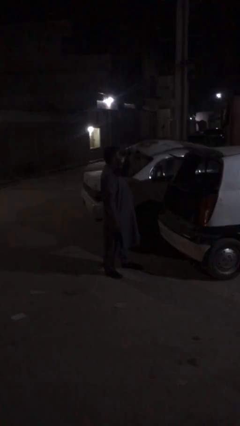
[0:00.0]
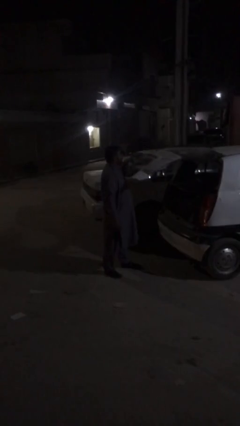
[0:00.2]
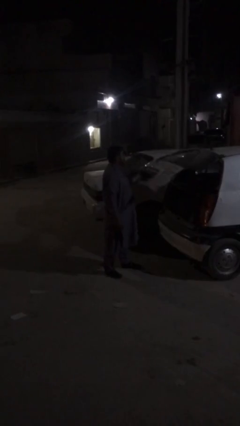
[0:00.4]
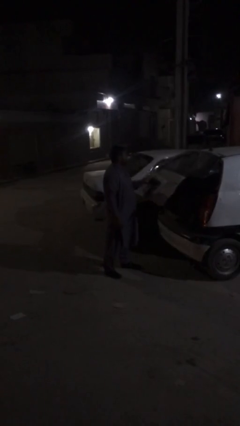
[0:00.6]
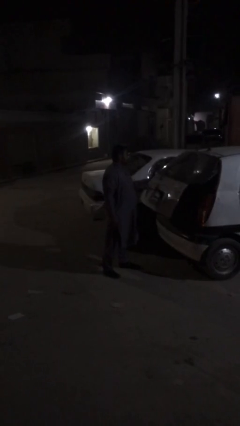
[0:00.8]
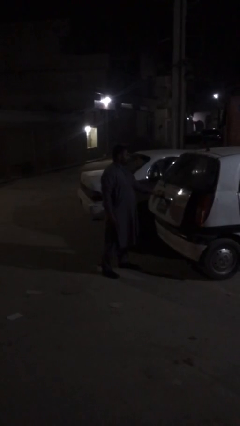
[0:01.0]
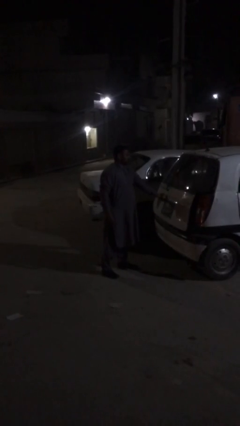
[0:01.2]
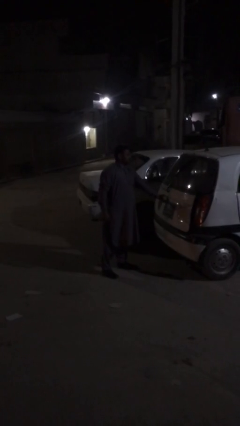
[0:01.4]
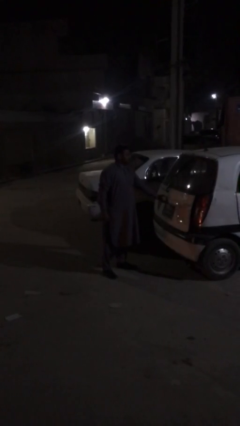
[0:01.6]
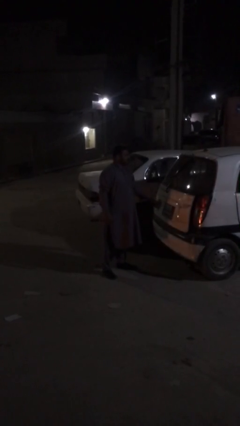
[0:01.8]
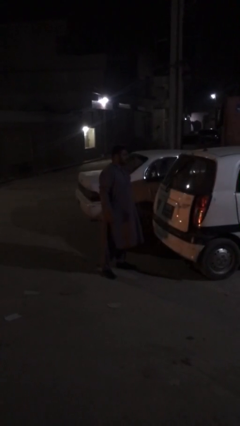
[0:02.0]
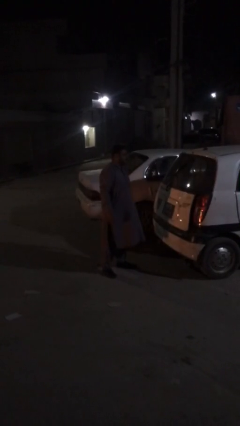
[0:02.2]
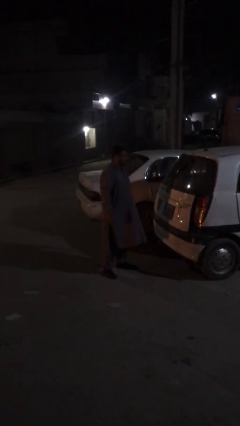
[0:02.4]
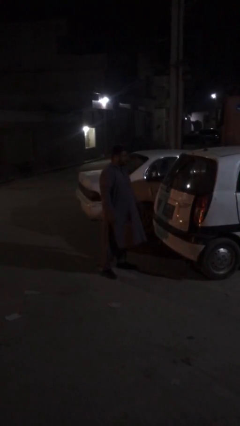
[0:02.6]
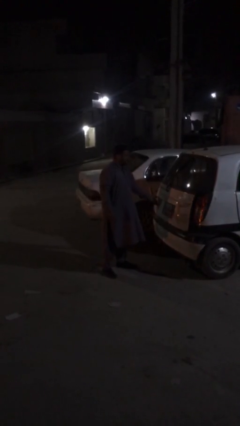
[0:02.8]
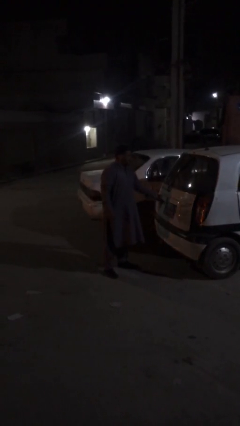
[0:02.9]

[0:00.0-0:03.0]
person closes car trunk

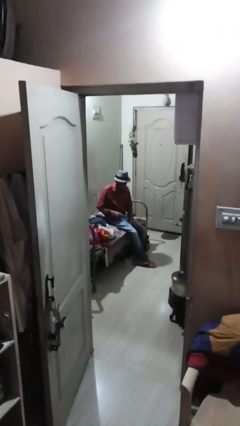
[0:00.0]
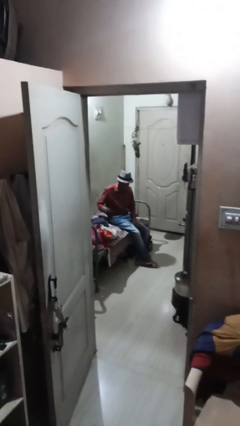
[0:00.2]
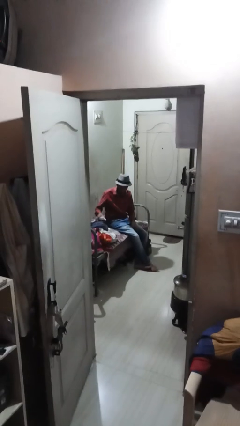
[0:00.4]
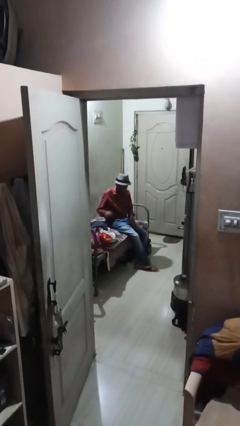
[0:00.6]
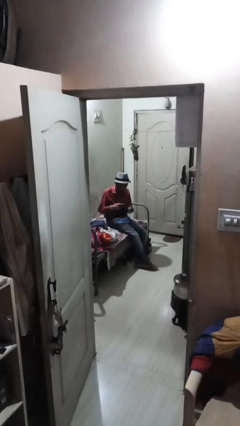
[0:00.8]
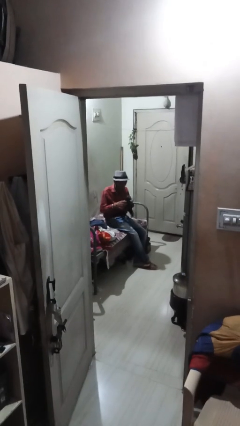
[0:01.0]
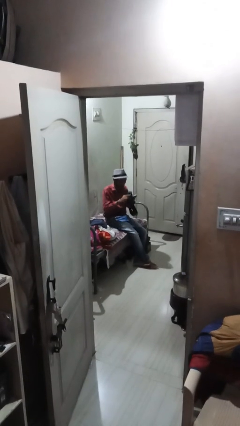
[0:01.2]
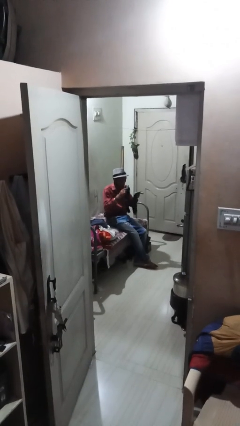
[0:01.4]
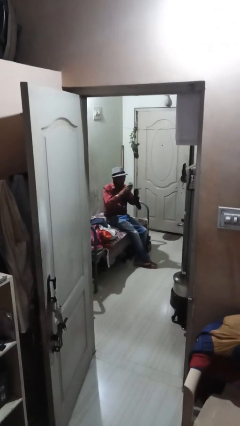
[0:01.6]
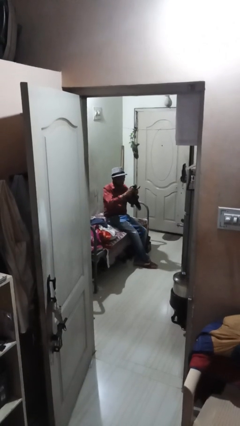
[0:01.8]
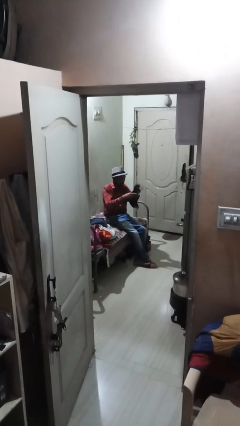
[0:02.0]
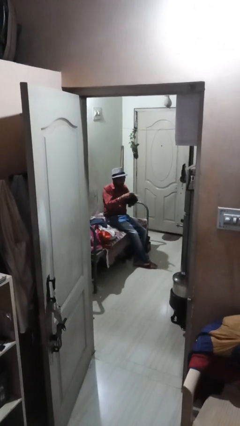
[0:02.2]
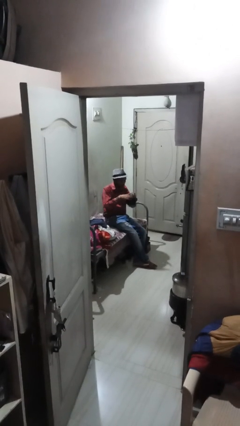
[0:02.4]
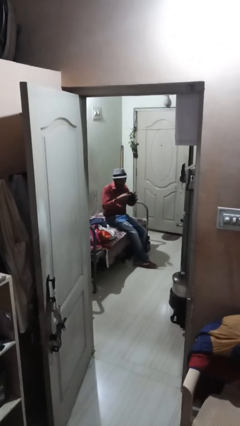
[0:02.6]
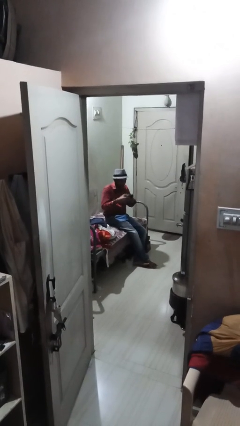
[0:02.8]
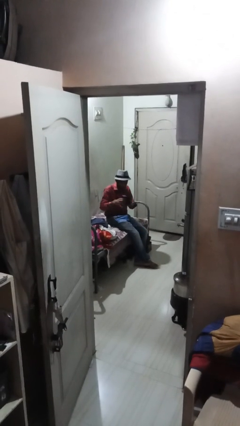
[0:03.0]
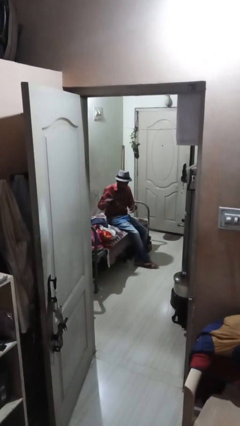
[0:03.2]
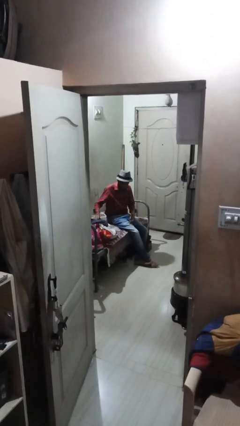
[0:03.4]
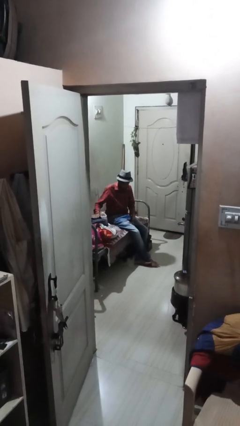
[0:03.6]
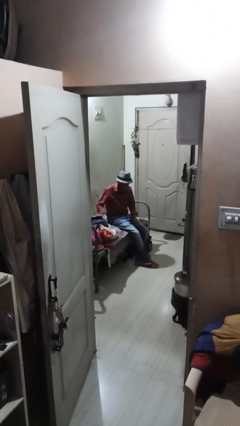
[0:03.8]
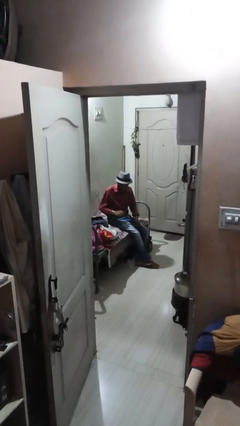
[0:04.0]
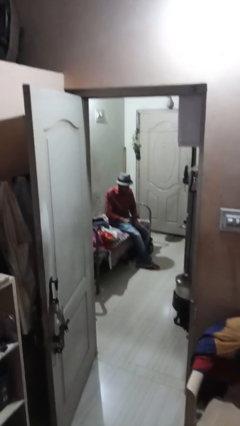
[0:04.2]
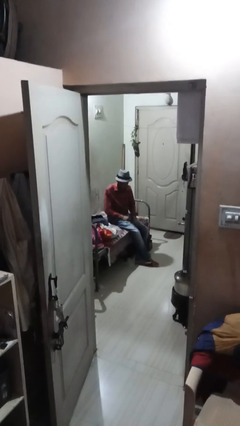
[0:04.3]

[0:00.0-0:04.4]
person folds socks

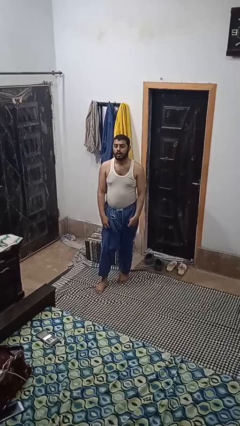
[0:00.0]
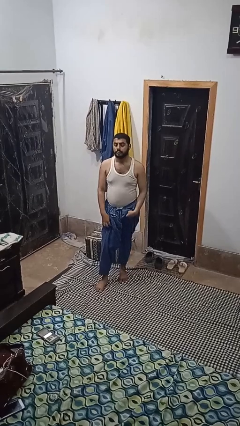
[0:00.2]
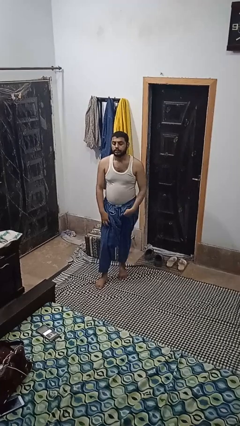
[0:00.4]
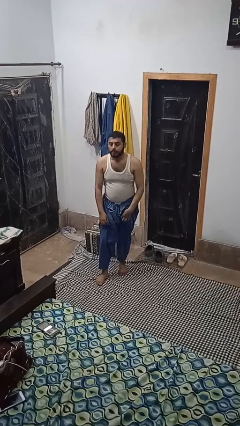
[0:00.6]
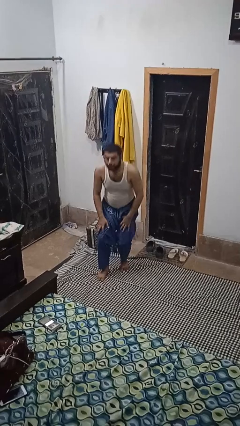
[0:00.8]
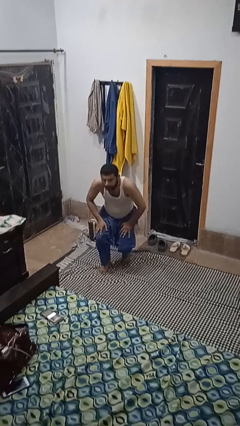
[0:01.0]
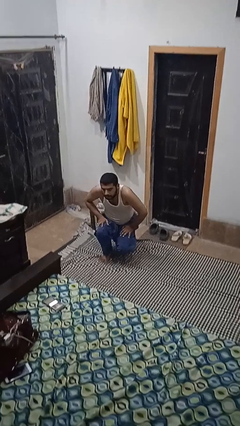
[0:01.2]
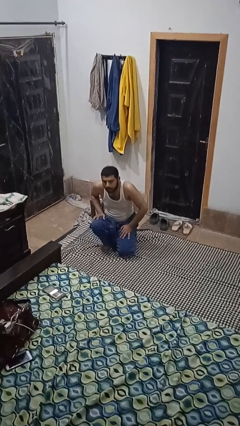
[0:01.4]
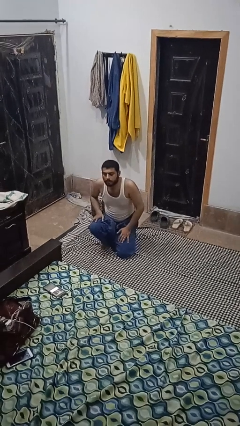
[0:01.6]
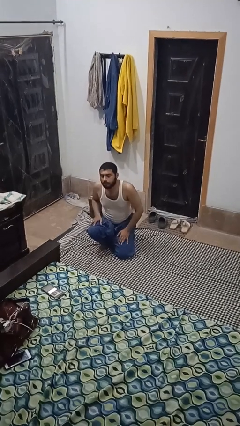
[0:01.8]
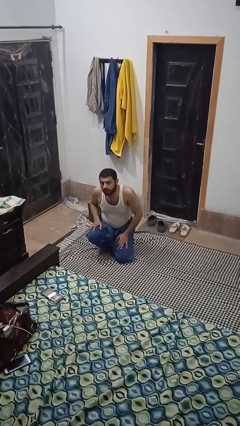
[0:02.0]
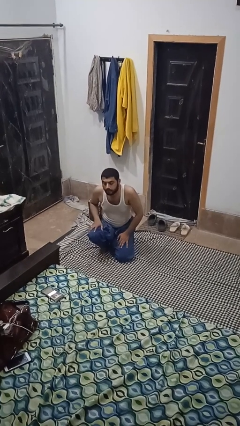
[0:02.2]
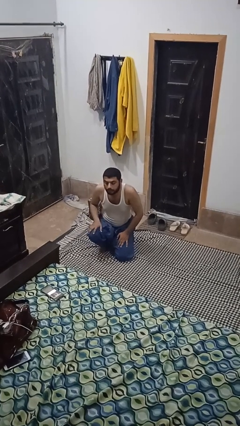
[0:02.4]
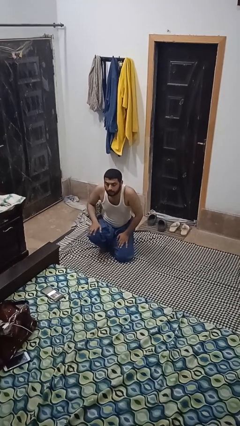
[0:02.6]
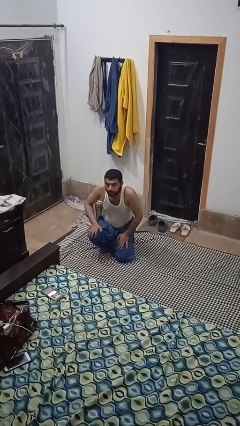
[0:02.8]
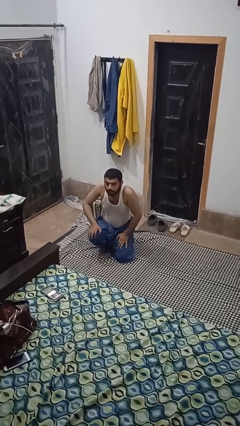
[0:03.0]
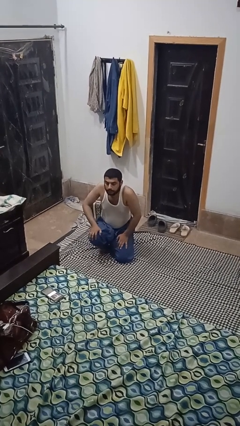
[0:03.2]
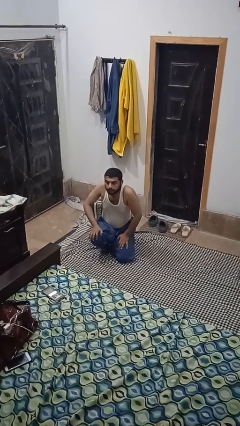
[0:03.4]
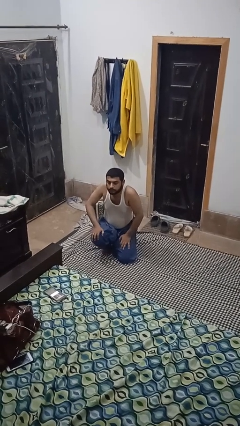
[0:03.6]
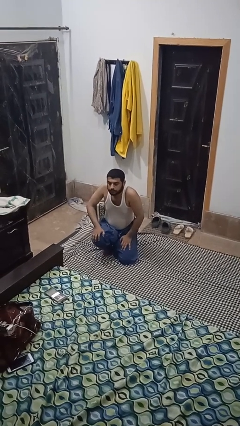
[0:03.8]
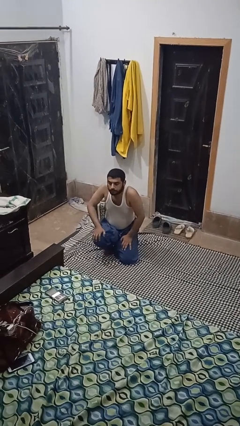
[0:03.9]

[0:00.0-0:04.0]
person kneels

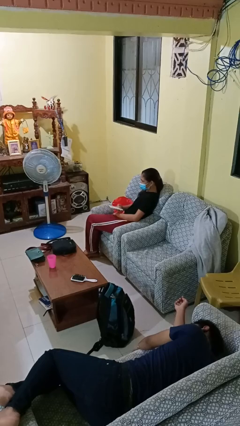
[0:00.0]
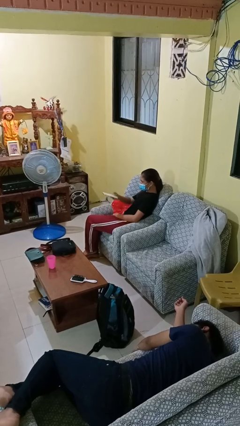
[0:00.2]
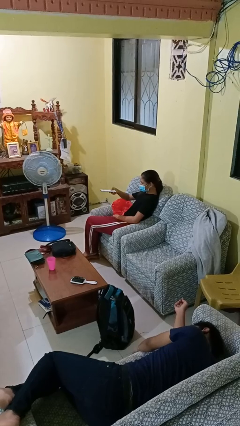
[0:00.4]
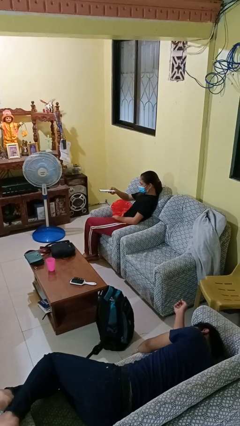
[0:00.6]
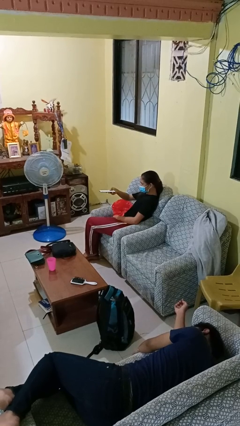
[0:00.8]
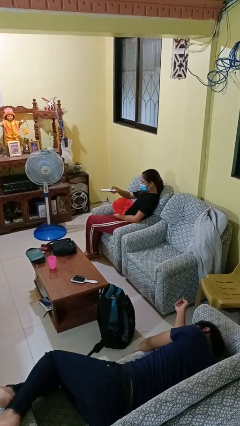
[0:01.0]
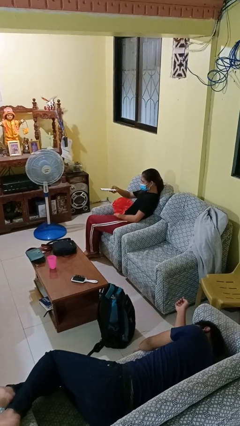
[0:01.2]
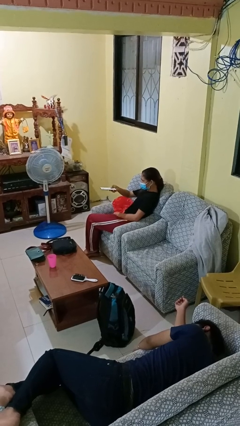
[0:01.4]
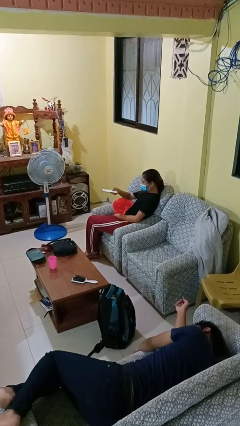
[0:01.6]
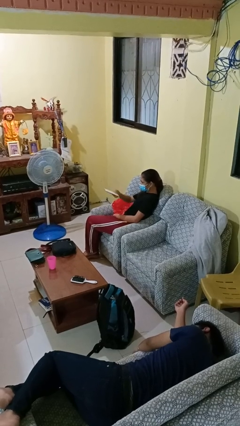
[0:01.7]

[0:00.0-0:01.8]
person uses television remote

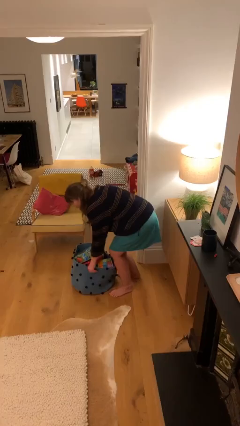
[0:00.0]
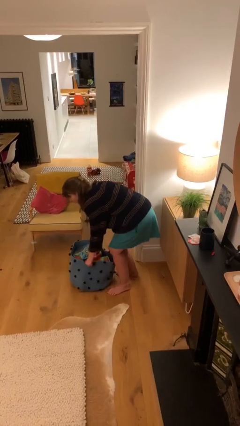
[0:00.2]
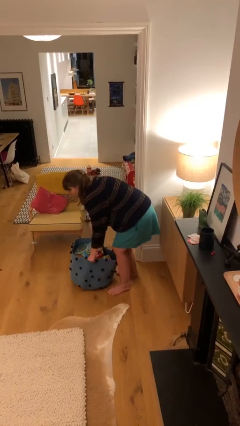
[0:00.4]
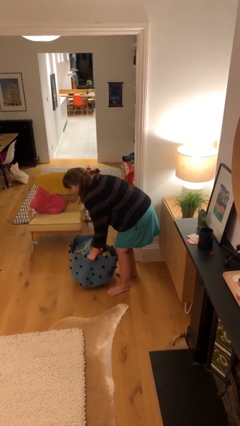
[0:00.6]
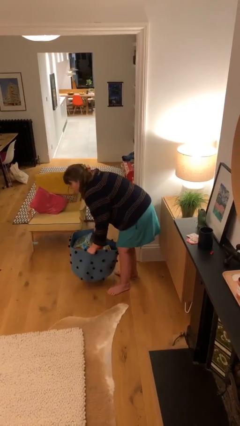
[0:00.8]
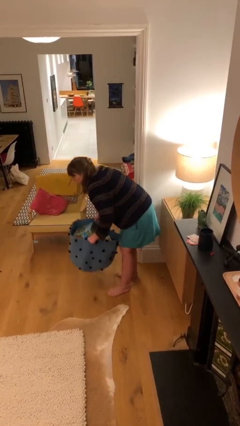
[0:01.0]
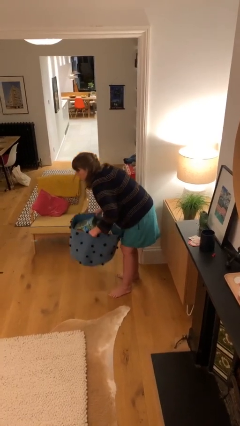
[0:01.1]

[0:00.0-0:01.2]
person picks up object from floor

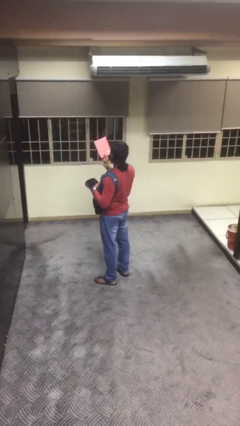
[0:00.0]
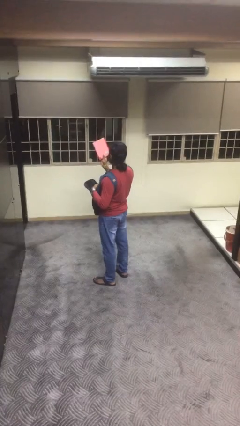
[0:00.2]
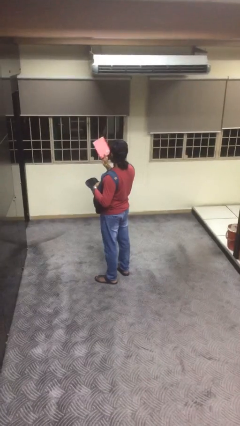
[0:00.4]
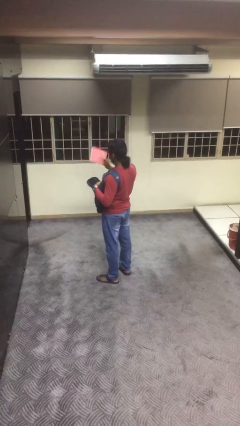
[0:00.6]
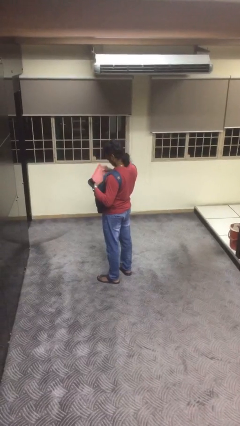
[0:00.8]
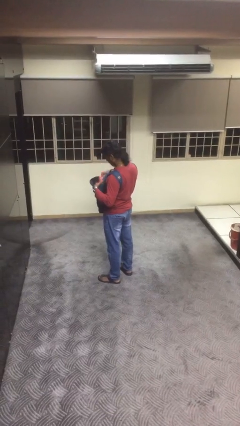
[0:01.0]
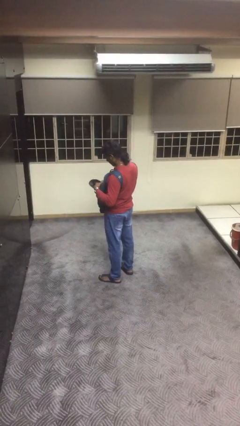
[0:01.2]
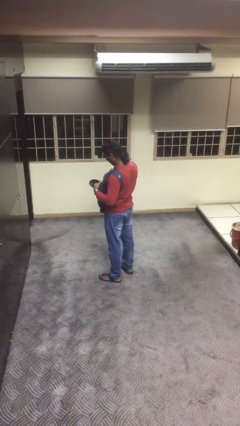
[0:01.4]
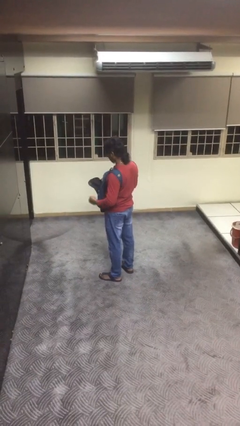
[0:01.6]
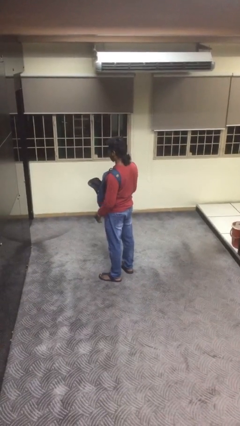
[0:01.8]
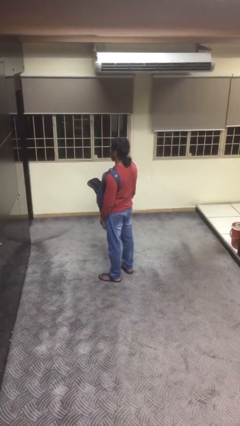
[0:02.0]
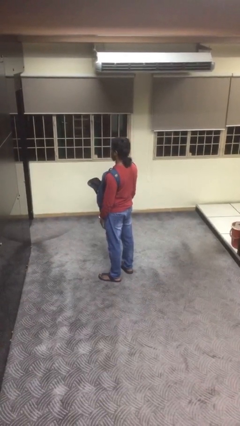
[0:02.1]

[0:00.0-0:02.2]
person puts object into backpack

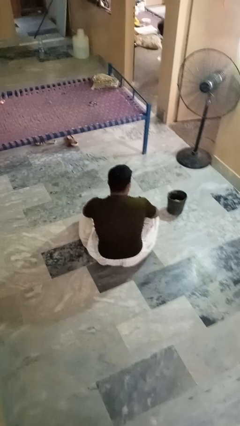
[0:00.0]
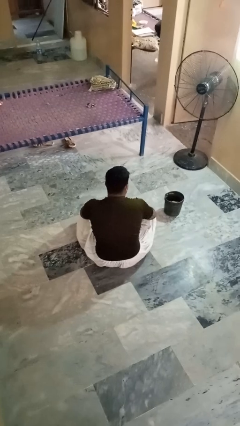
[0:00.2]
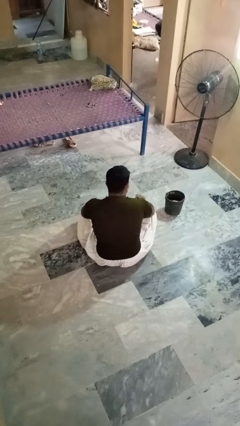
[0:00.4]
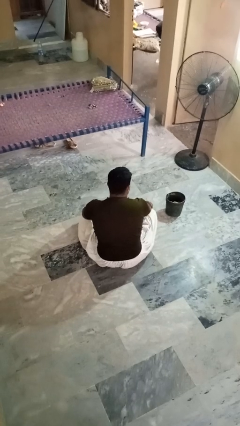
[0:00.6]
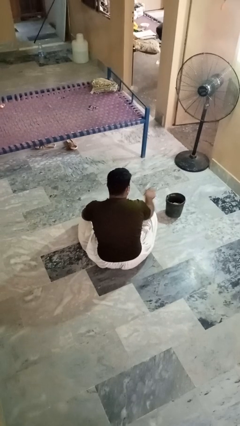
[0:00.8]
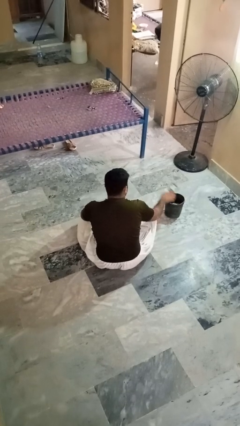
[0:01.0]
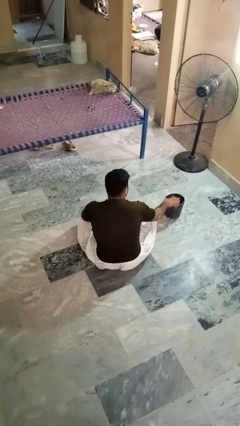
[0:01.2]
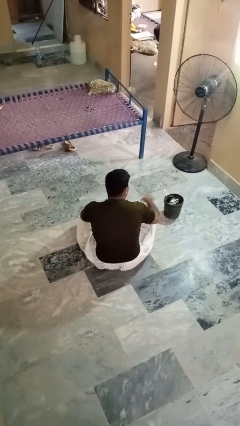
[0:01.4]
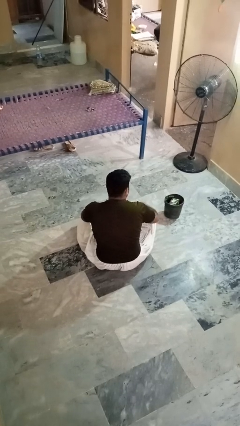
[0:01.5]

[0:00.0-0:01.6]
person puts object into basket
